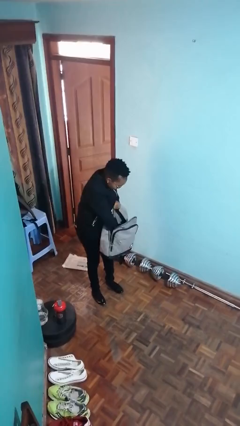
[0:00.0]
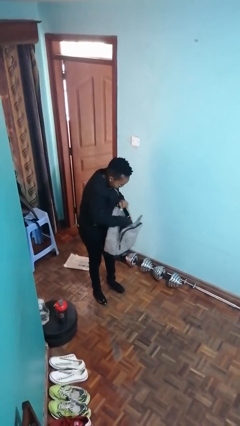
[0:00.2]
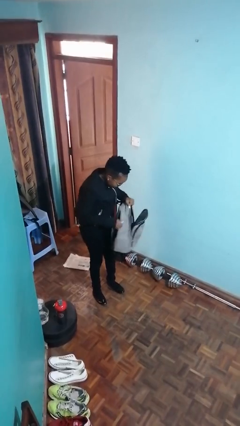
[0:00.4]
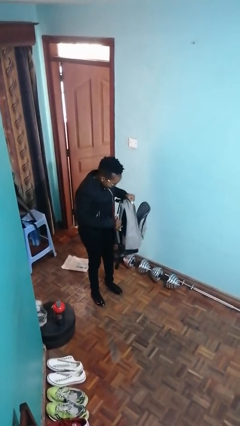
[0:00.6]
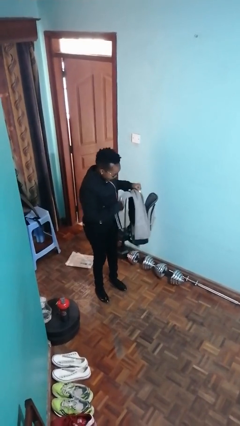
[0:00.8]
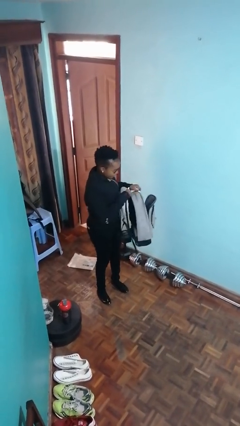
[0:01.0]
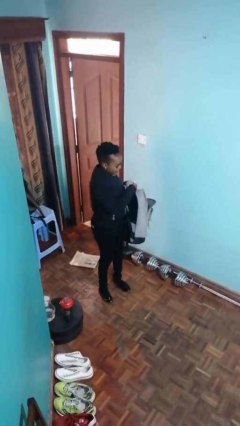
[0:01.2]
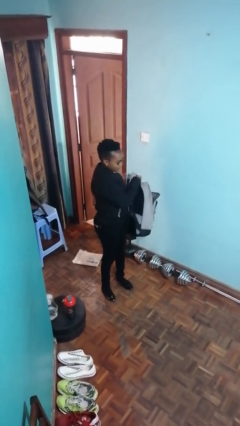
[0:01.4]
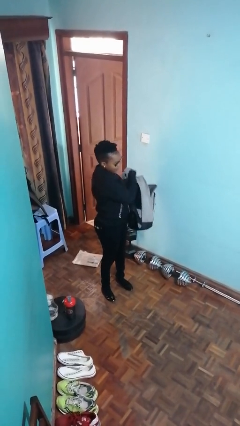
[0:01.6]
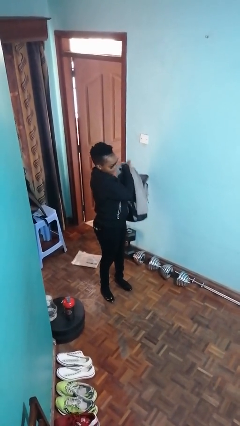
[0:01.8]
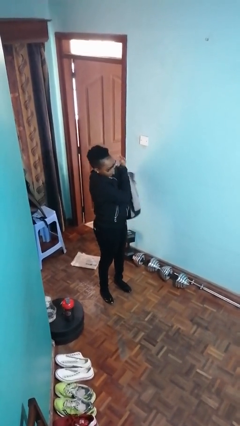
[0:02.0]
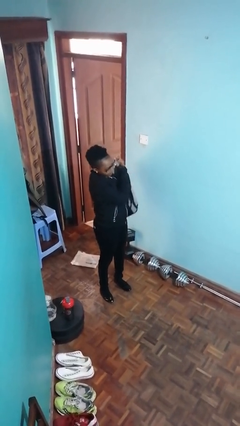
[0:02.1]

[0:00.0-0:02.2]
person puts object into backpack

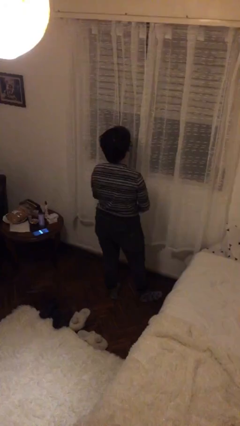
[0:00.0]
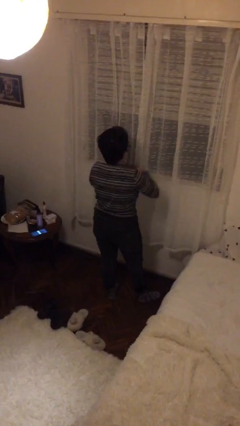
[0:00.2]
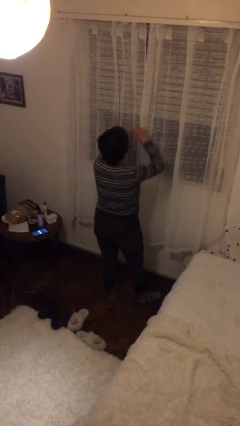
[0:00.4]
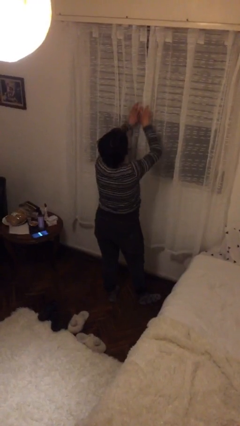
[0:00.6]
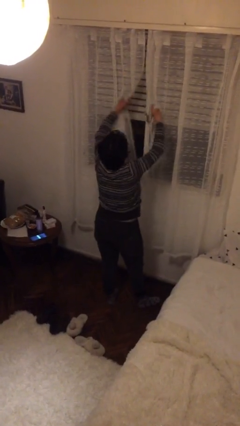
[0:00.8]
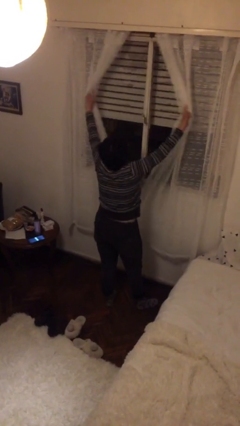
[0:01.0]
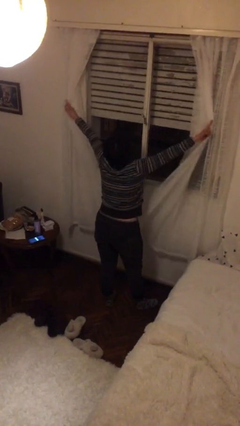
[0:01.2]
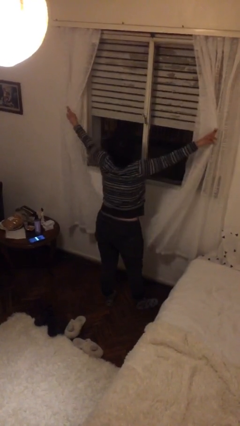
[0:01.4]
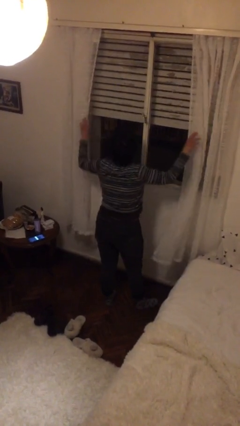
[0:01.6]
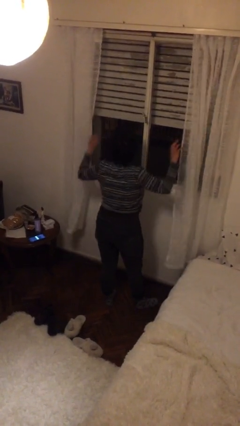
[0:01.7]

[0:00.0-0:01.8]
person opens curtains

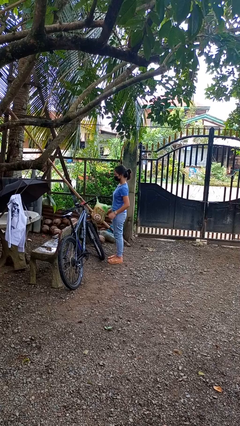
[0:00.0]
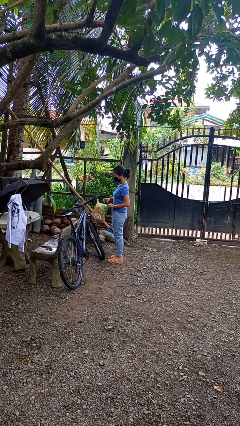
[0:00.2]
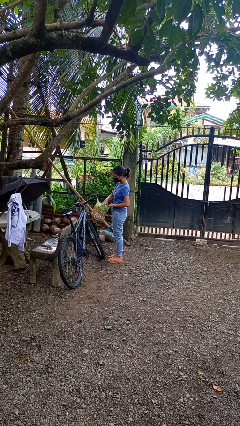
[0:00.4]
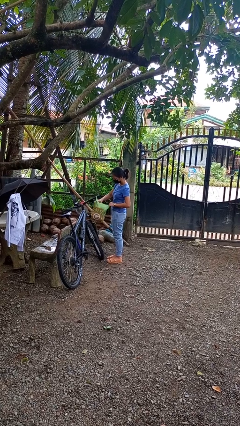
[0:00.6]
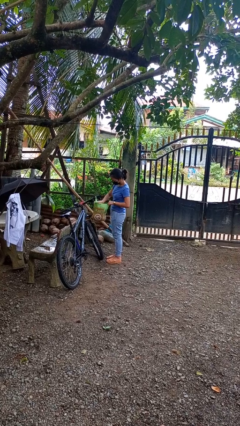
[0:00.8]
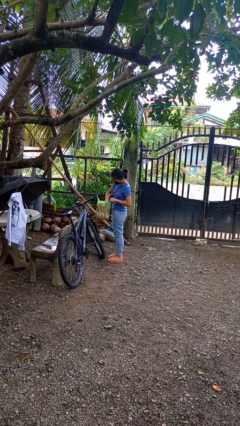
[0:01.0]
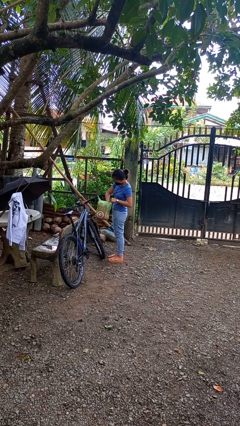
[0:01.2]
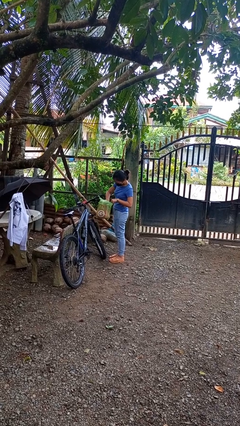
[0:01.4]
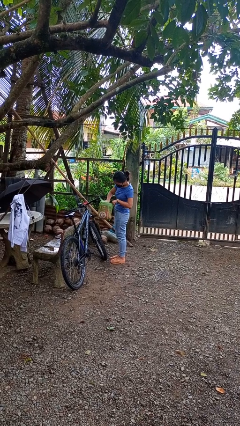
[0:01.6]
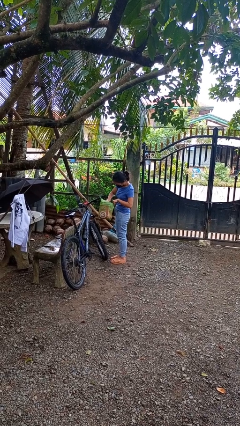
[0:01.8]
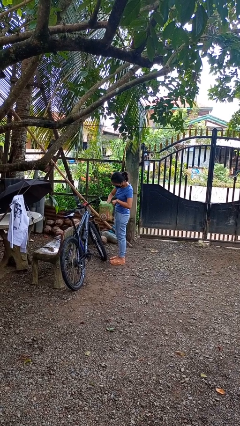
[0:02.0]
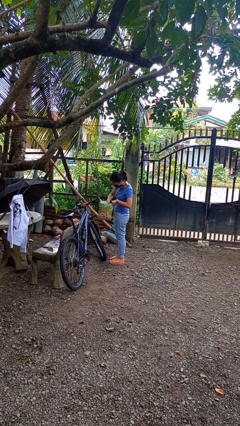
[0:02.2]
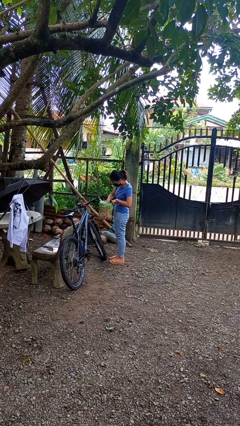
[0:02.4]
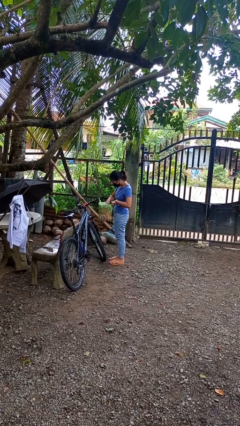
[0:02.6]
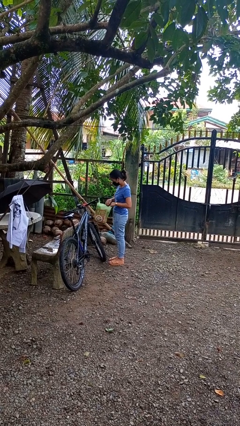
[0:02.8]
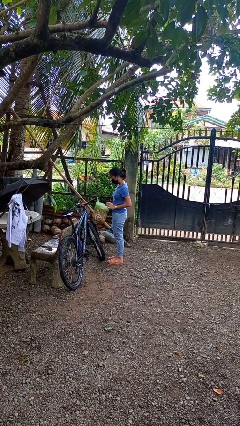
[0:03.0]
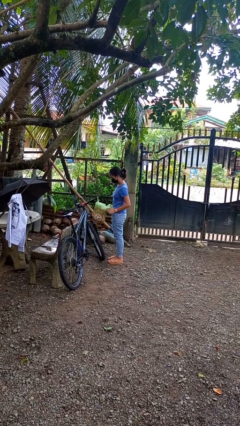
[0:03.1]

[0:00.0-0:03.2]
person searches in bag

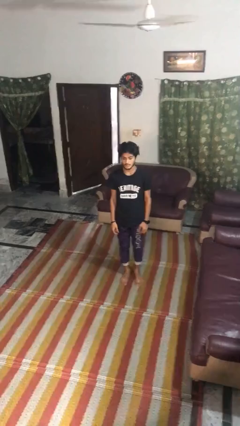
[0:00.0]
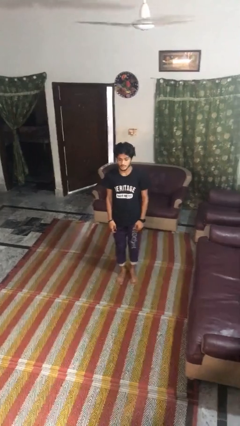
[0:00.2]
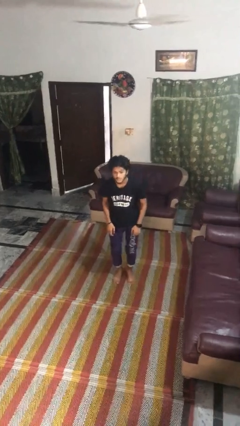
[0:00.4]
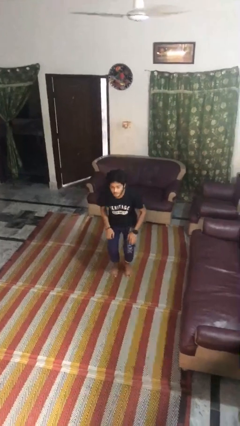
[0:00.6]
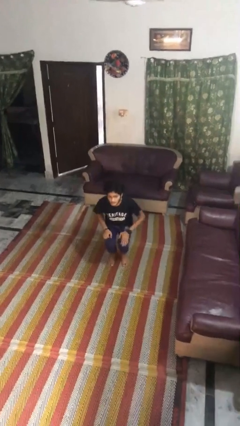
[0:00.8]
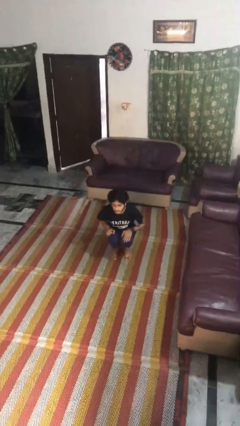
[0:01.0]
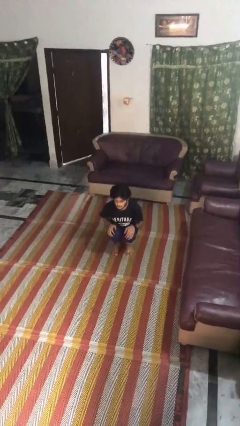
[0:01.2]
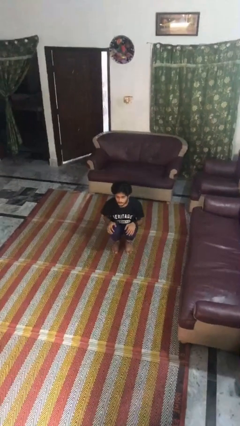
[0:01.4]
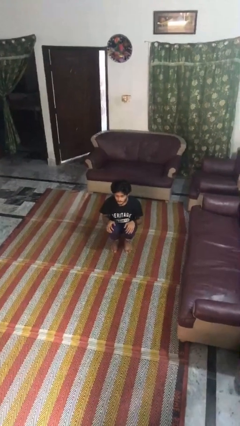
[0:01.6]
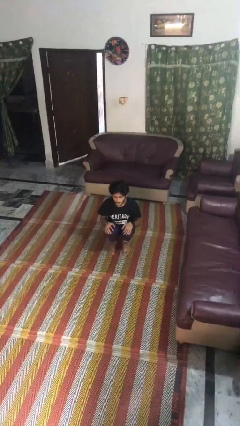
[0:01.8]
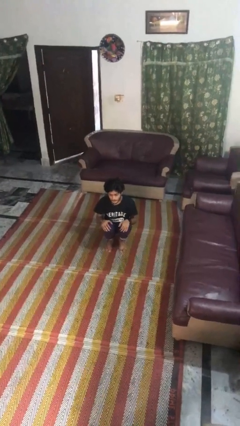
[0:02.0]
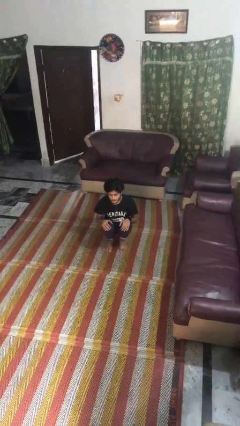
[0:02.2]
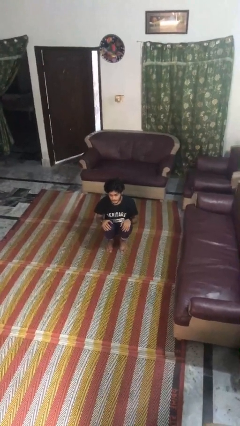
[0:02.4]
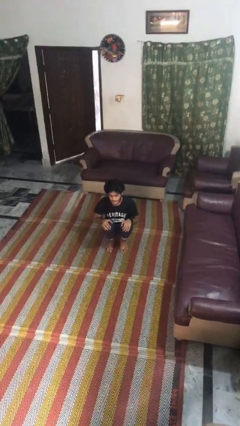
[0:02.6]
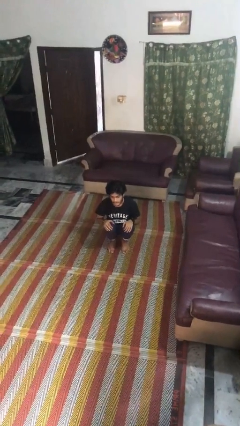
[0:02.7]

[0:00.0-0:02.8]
person squats

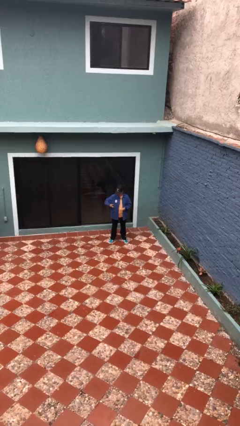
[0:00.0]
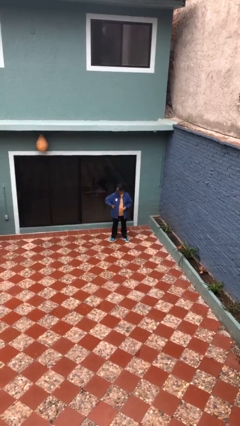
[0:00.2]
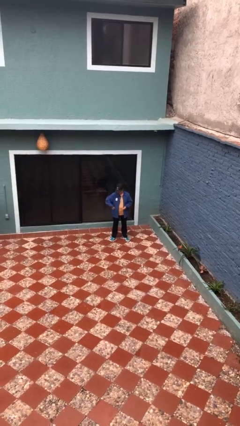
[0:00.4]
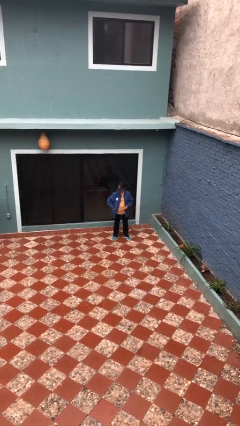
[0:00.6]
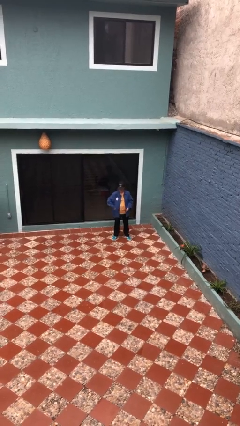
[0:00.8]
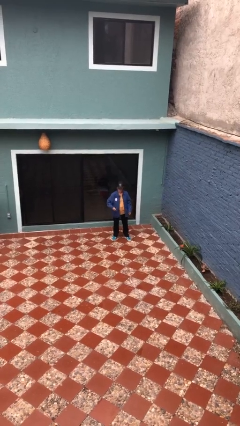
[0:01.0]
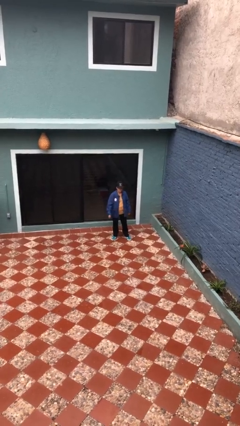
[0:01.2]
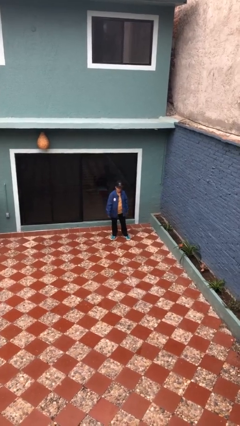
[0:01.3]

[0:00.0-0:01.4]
person puts phone into pocket

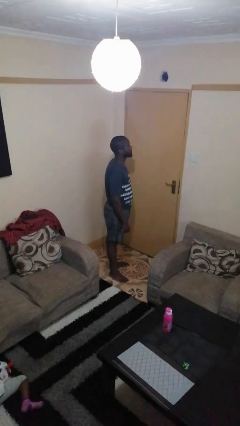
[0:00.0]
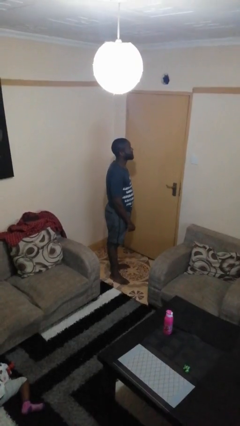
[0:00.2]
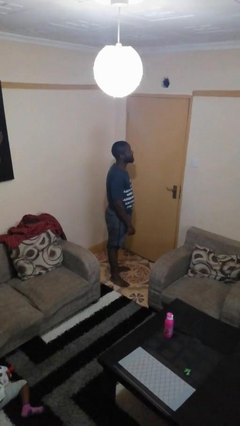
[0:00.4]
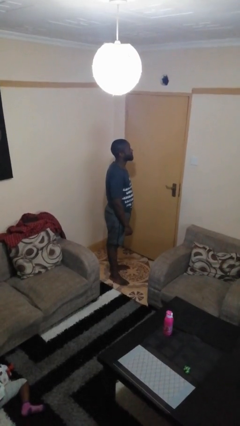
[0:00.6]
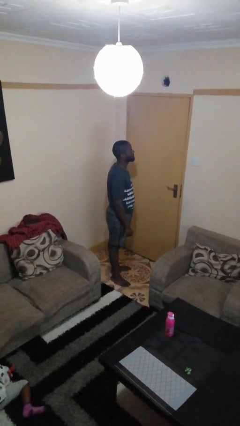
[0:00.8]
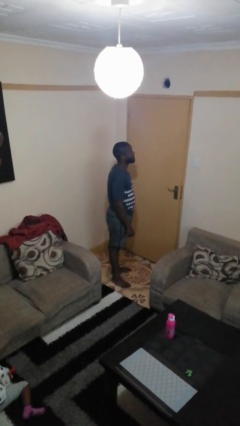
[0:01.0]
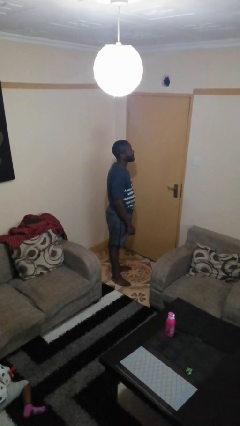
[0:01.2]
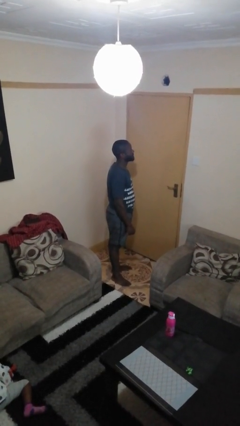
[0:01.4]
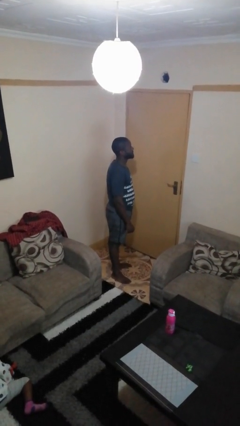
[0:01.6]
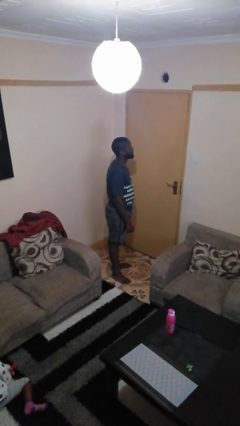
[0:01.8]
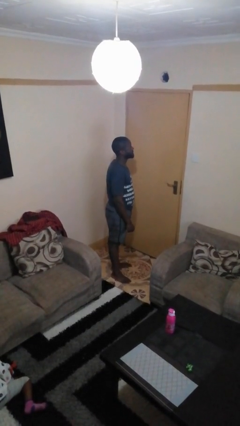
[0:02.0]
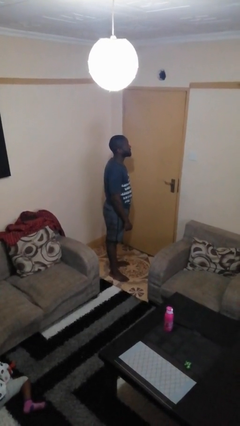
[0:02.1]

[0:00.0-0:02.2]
person gestures number one

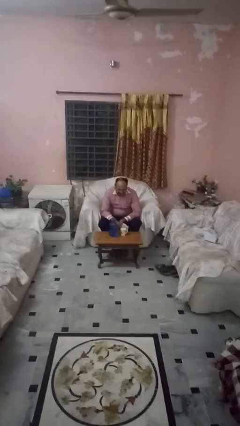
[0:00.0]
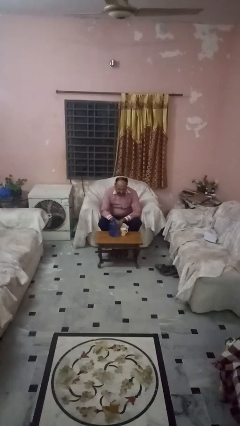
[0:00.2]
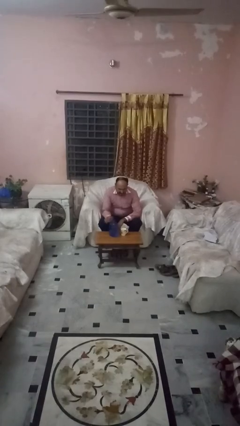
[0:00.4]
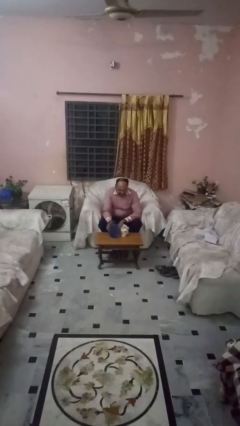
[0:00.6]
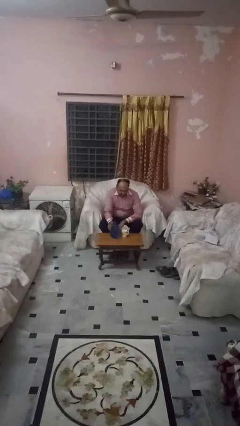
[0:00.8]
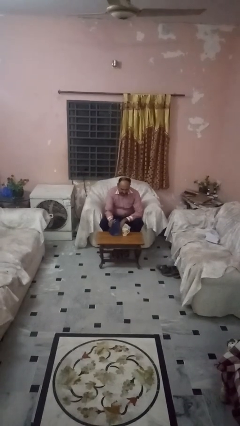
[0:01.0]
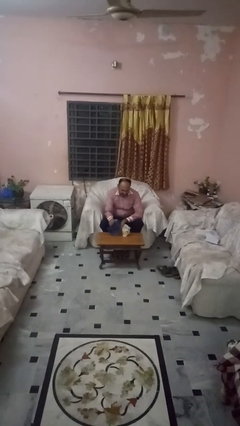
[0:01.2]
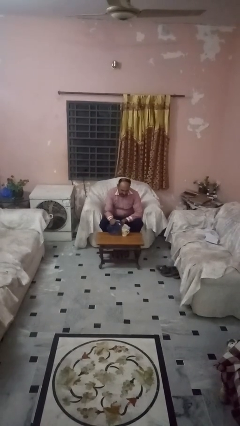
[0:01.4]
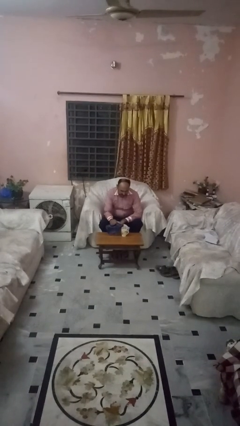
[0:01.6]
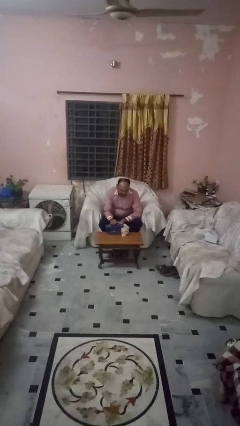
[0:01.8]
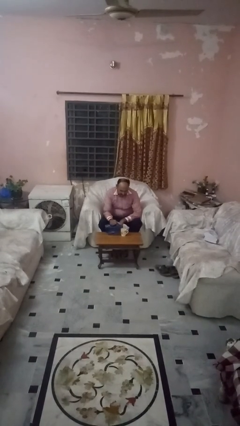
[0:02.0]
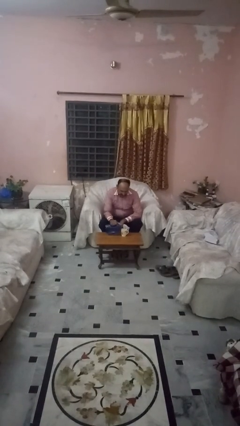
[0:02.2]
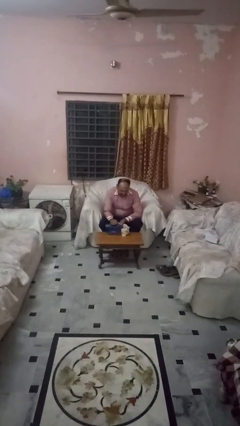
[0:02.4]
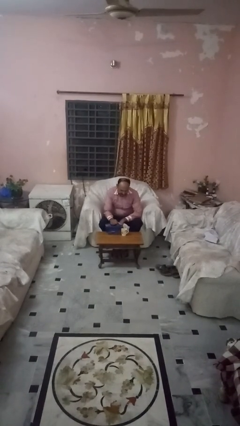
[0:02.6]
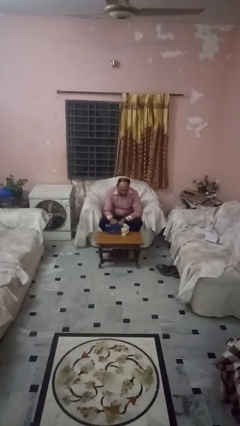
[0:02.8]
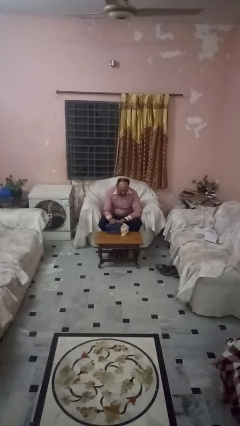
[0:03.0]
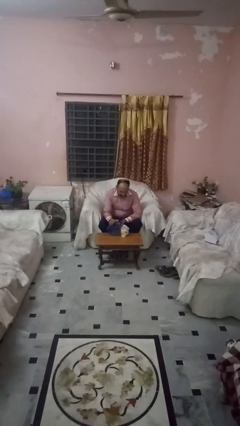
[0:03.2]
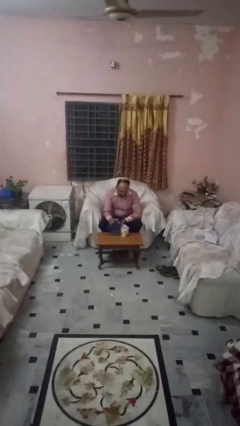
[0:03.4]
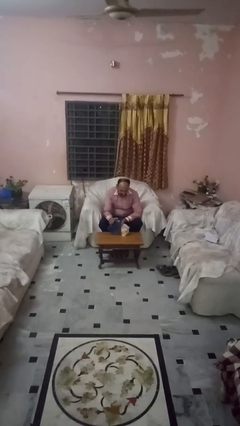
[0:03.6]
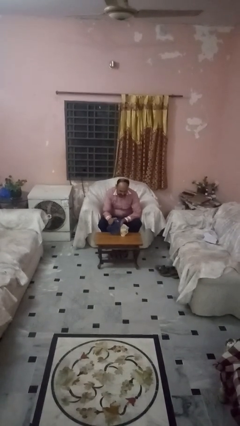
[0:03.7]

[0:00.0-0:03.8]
person pours liquid into cup
